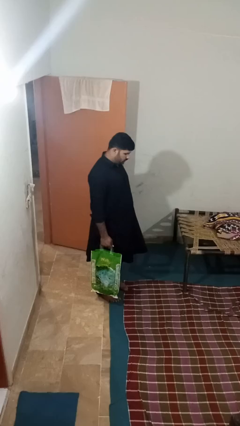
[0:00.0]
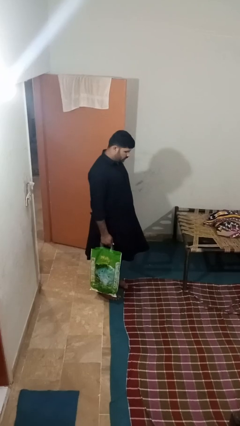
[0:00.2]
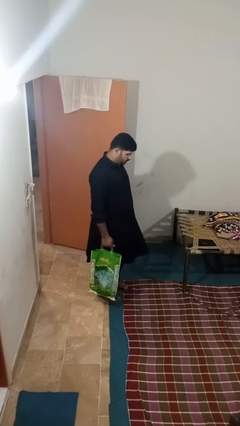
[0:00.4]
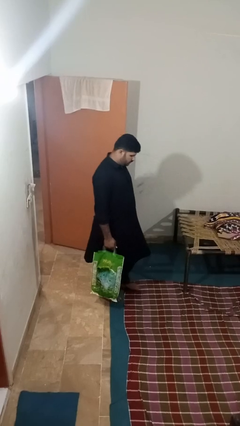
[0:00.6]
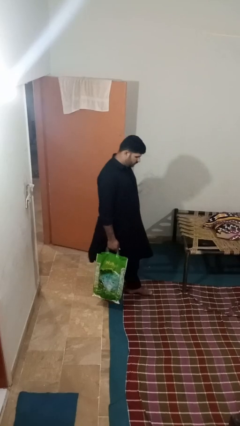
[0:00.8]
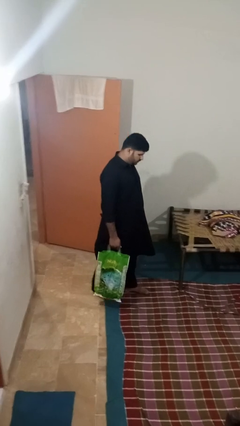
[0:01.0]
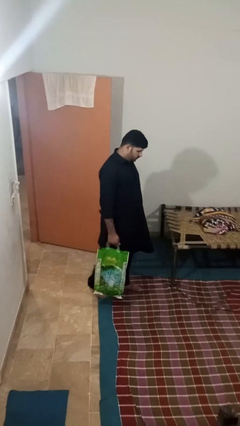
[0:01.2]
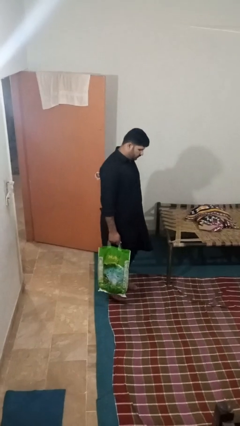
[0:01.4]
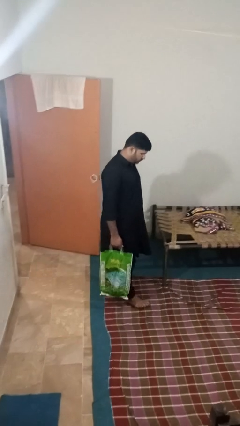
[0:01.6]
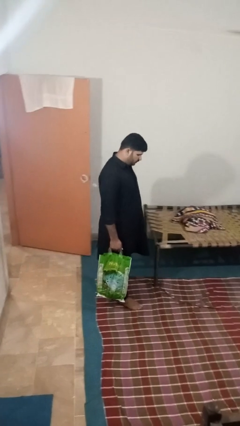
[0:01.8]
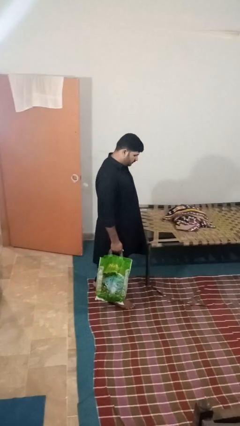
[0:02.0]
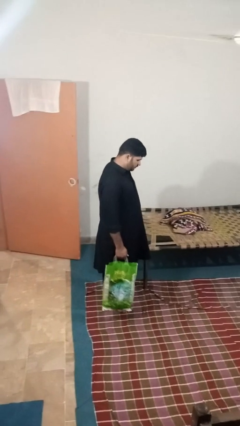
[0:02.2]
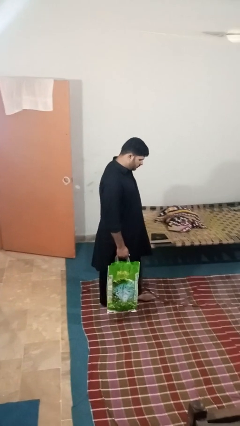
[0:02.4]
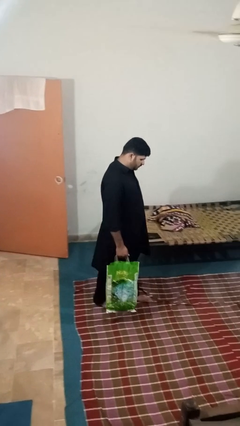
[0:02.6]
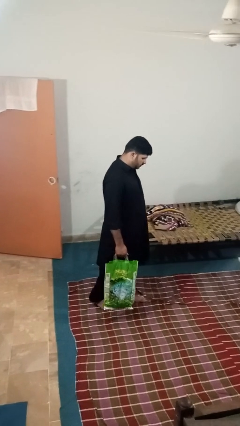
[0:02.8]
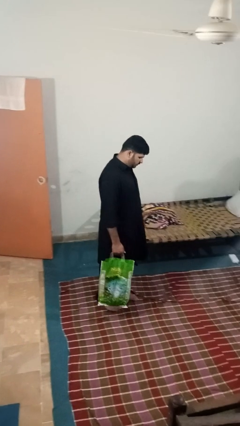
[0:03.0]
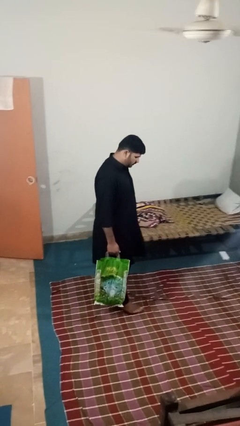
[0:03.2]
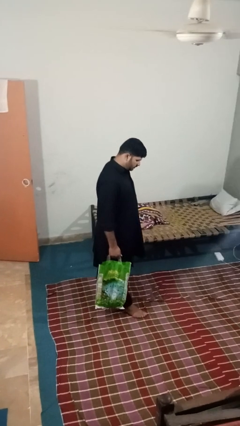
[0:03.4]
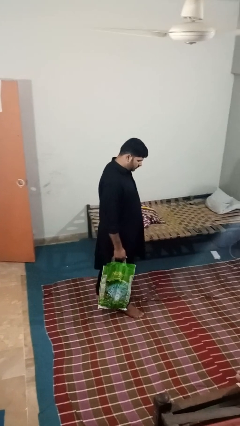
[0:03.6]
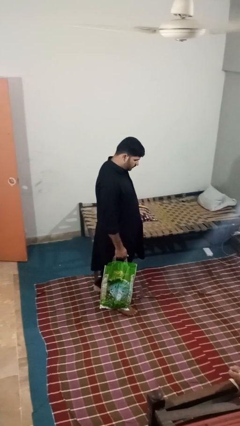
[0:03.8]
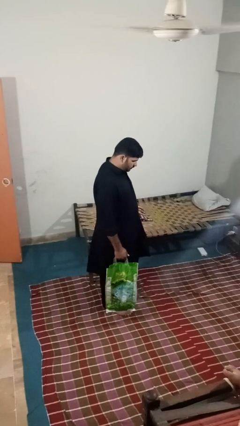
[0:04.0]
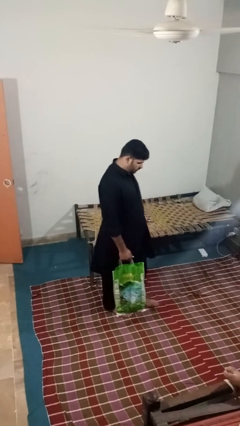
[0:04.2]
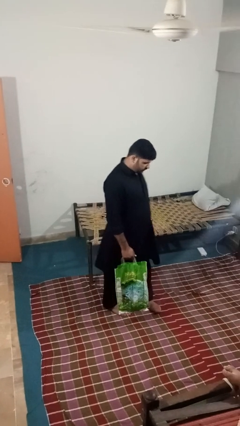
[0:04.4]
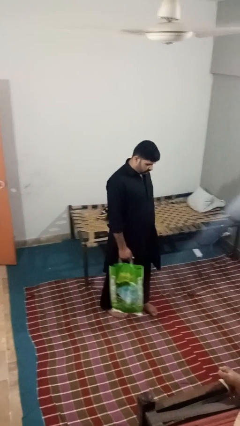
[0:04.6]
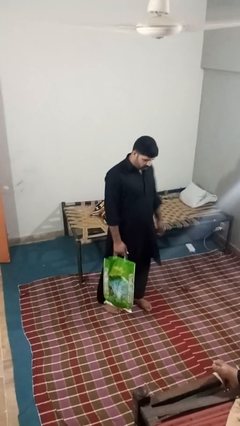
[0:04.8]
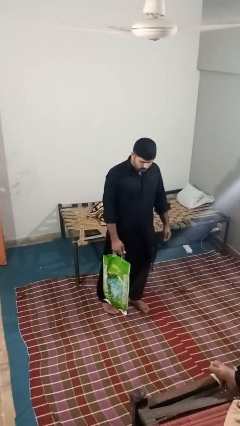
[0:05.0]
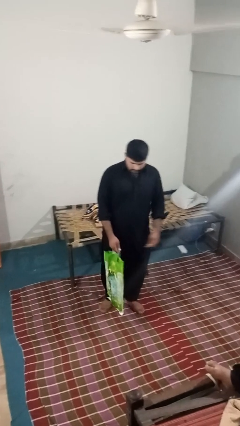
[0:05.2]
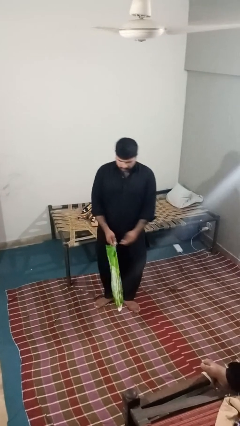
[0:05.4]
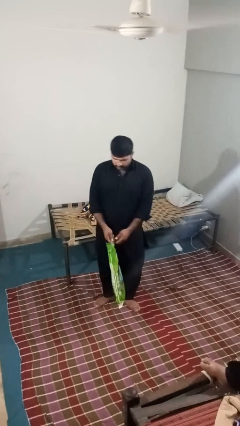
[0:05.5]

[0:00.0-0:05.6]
person carries groceries

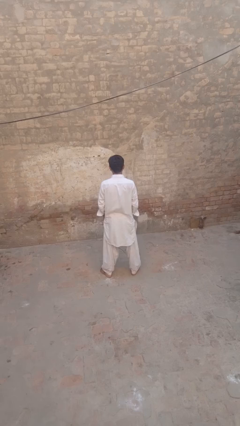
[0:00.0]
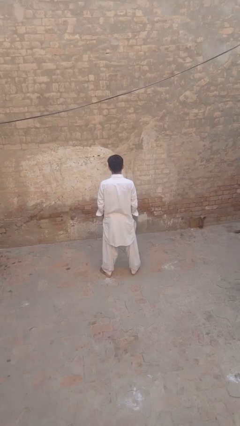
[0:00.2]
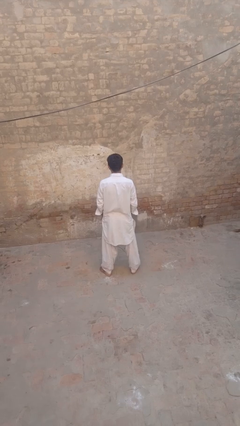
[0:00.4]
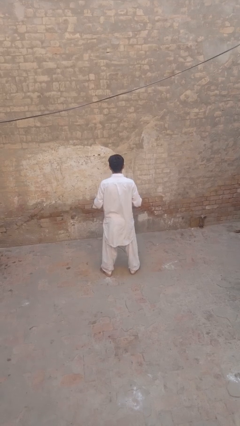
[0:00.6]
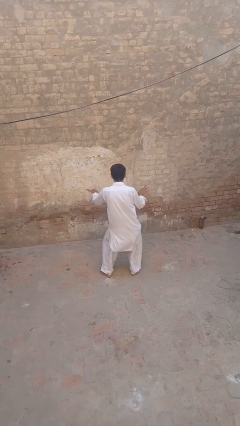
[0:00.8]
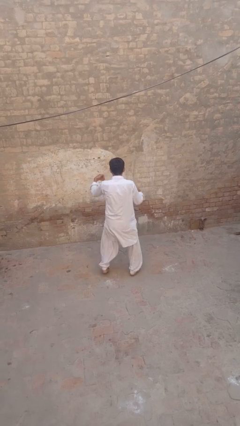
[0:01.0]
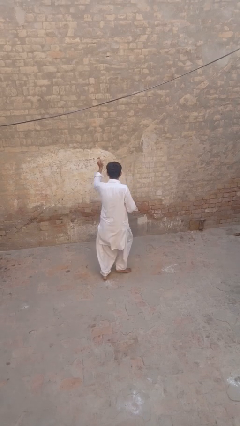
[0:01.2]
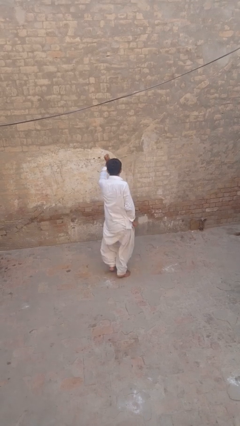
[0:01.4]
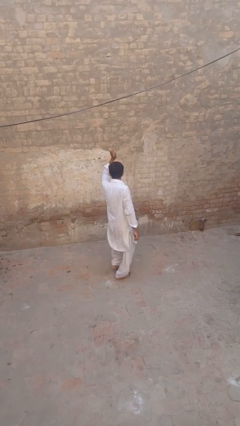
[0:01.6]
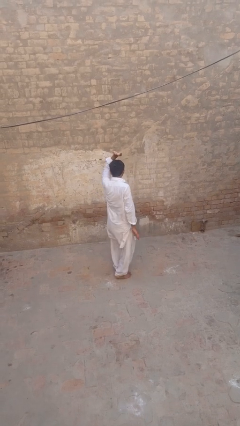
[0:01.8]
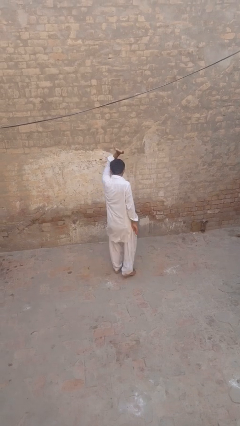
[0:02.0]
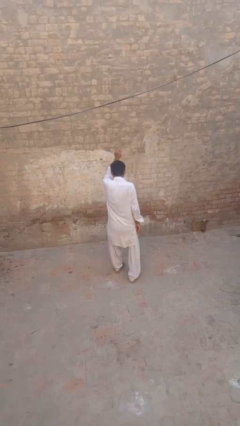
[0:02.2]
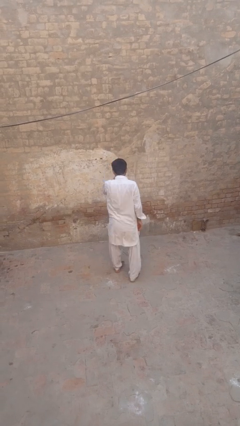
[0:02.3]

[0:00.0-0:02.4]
person dances in place

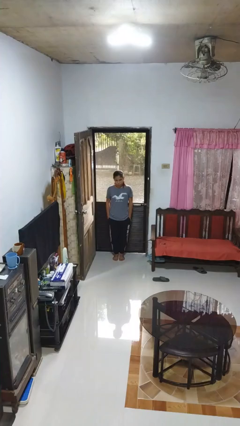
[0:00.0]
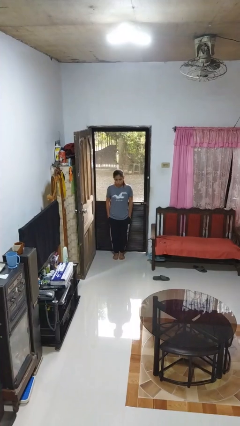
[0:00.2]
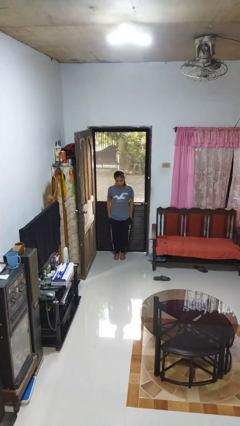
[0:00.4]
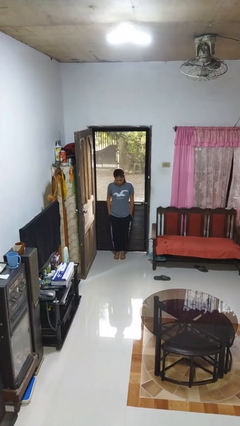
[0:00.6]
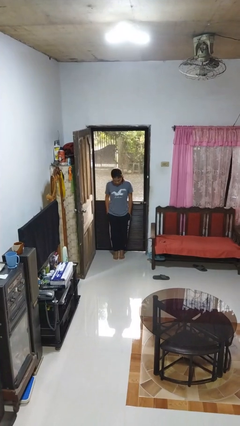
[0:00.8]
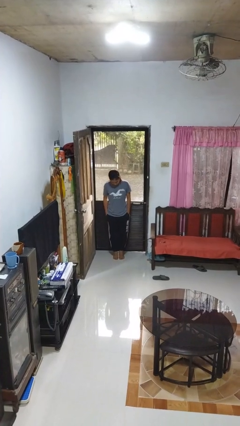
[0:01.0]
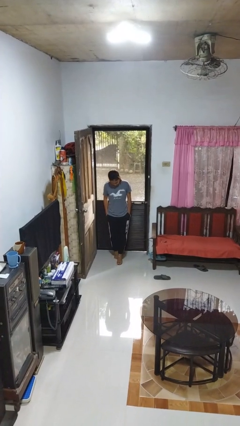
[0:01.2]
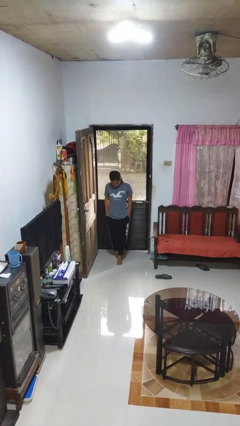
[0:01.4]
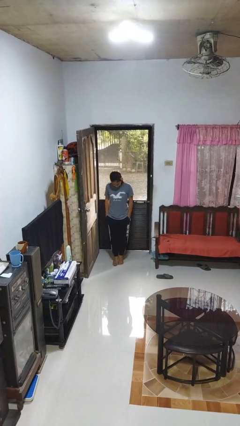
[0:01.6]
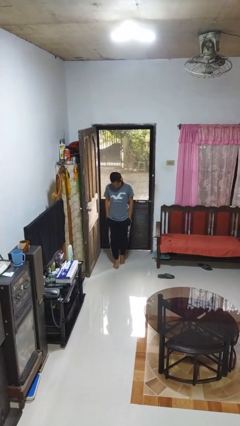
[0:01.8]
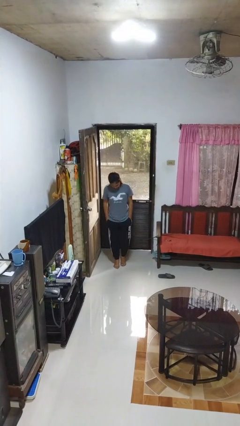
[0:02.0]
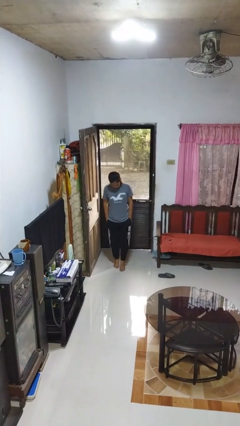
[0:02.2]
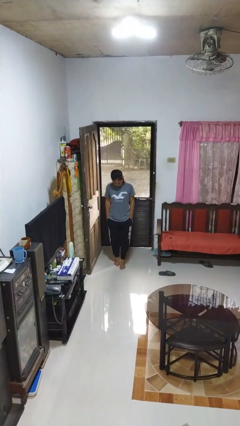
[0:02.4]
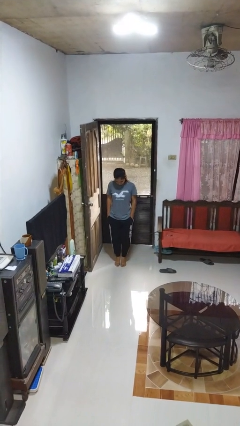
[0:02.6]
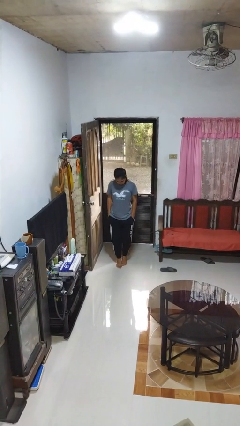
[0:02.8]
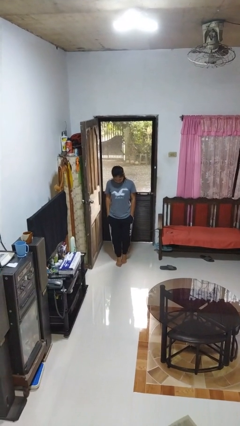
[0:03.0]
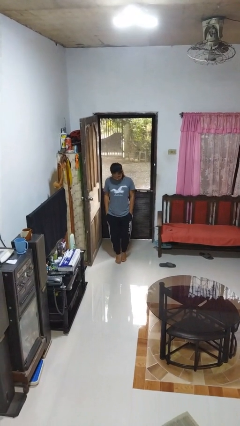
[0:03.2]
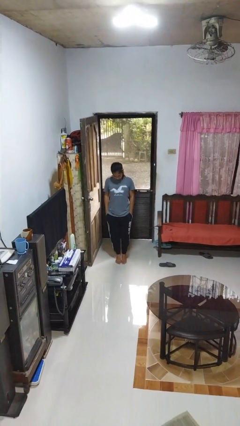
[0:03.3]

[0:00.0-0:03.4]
person walks tiptoe

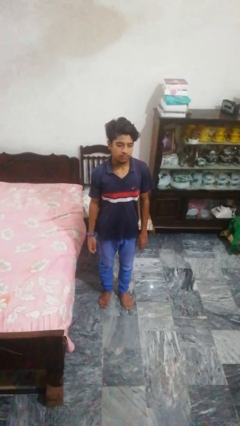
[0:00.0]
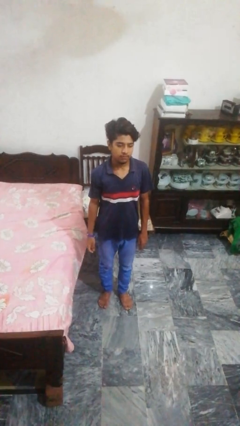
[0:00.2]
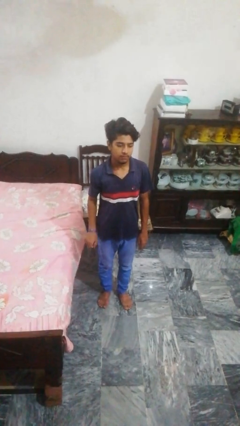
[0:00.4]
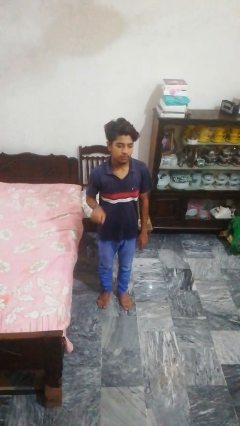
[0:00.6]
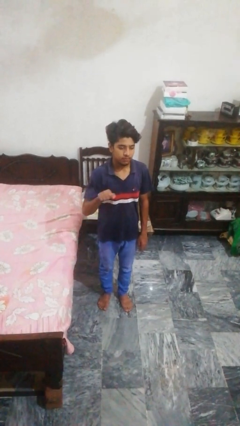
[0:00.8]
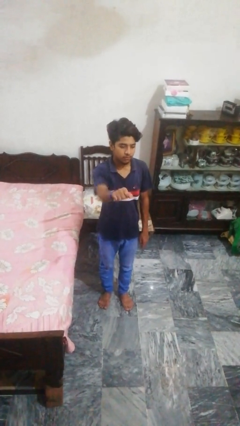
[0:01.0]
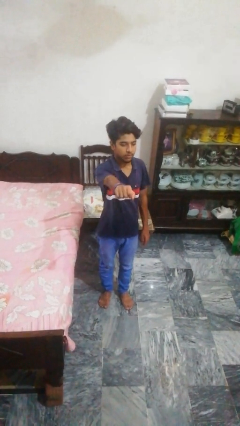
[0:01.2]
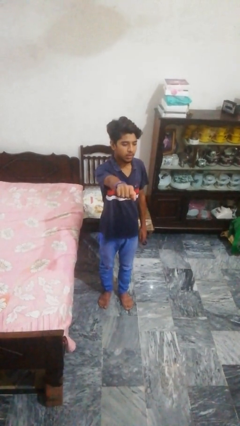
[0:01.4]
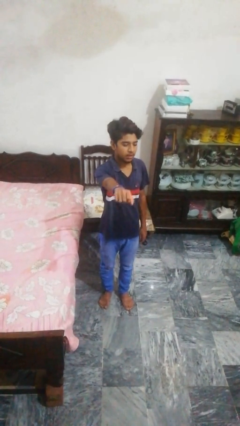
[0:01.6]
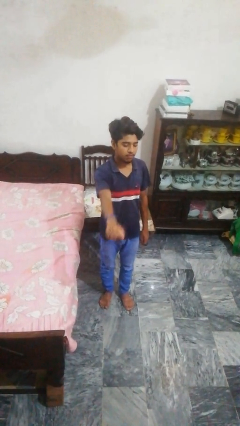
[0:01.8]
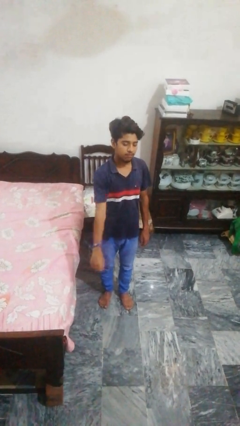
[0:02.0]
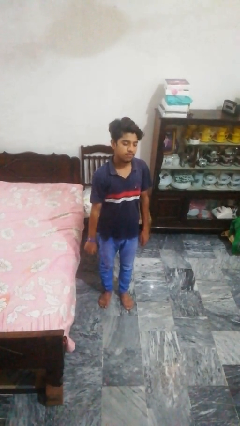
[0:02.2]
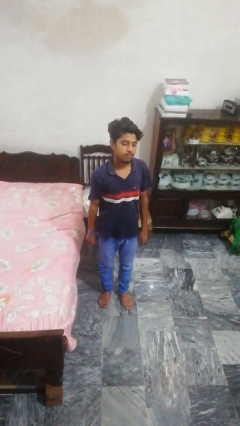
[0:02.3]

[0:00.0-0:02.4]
person punches

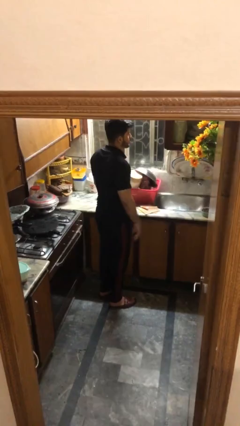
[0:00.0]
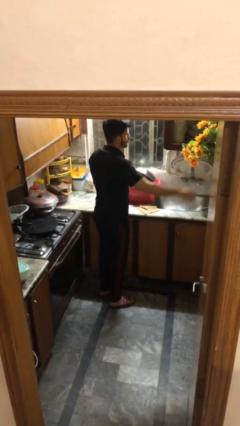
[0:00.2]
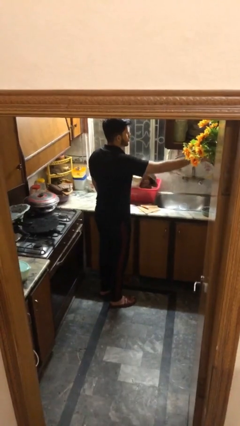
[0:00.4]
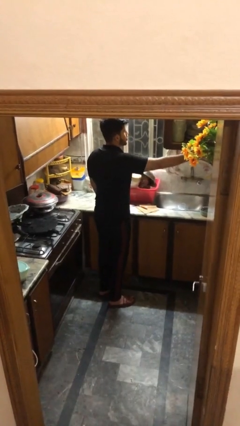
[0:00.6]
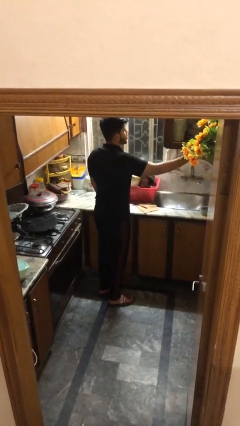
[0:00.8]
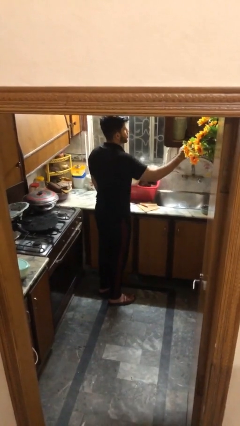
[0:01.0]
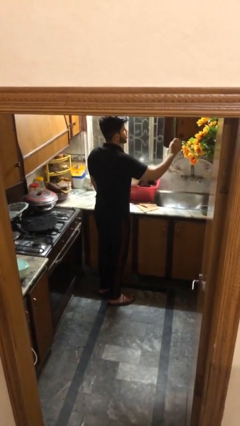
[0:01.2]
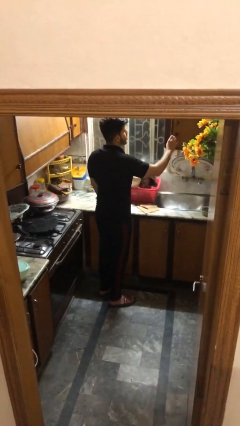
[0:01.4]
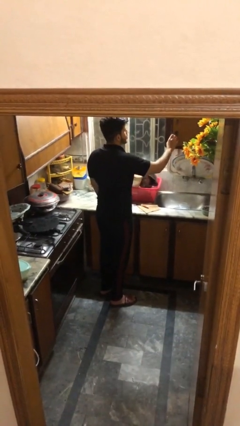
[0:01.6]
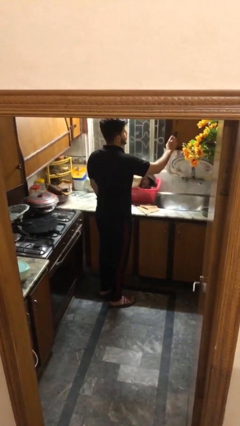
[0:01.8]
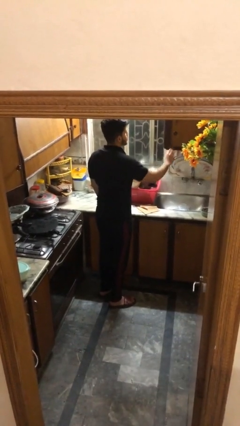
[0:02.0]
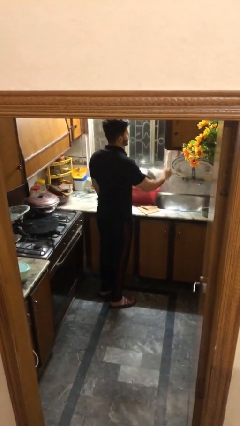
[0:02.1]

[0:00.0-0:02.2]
person closes kitchen drawer

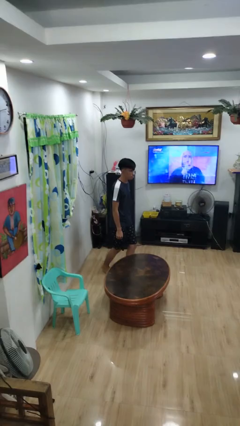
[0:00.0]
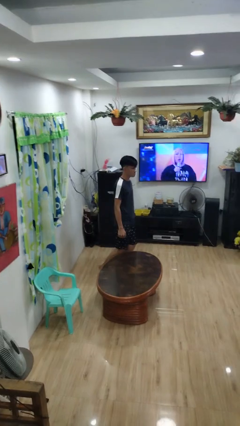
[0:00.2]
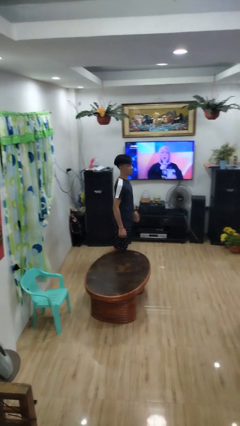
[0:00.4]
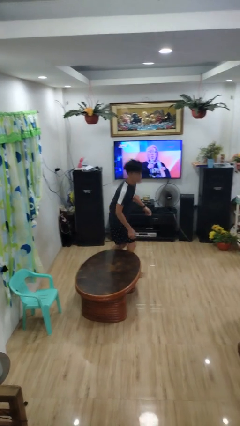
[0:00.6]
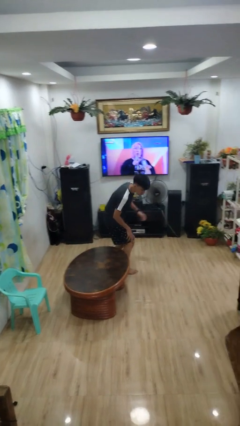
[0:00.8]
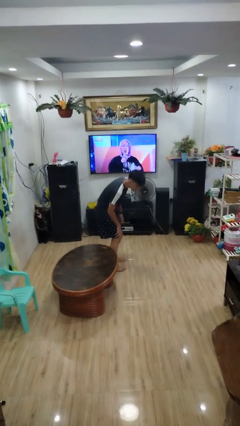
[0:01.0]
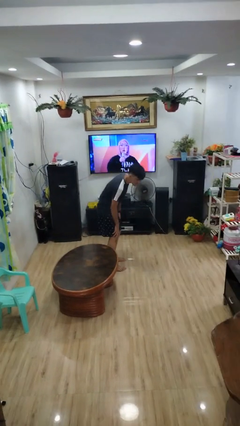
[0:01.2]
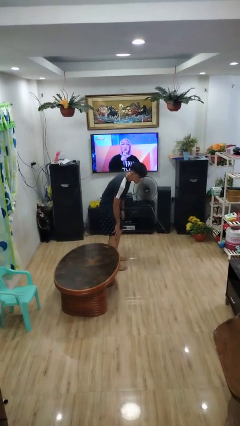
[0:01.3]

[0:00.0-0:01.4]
person bumps into table
